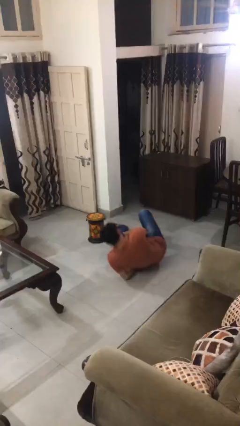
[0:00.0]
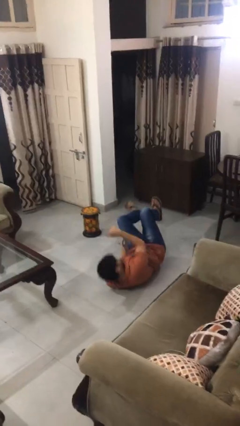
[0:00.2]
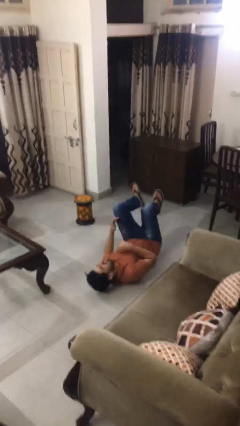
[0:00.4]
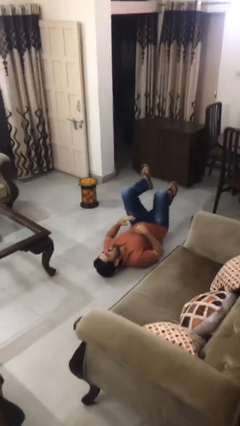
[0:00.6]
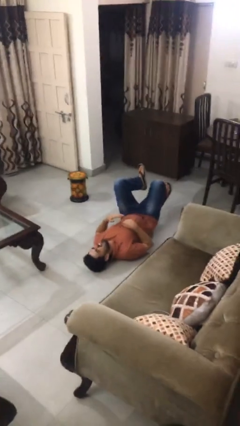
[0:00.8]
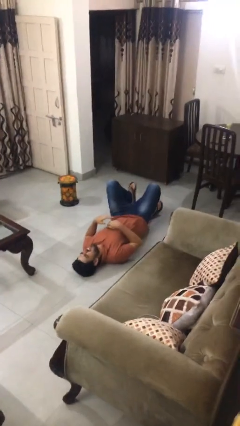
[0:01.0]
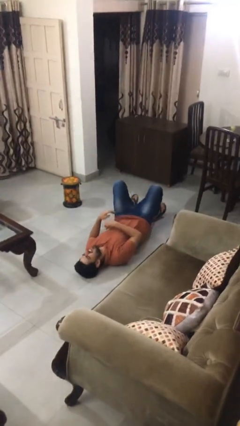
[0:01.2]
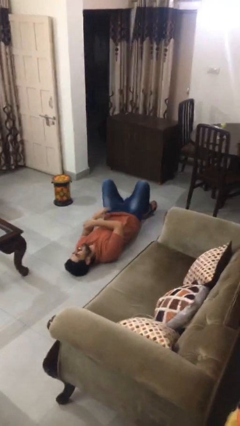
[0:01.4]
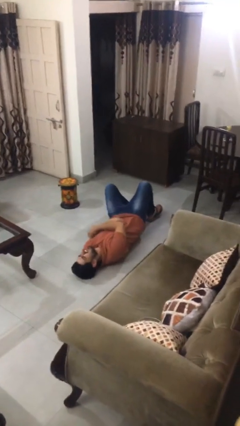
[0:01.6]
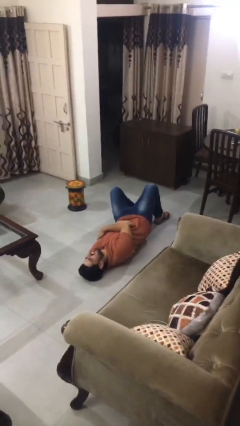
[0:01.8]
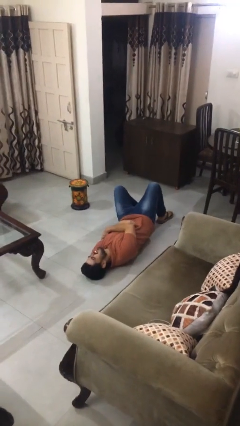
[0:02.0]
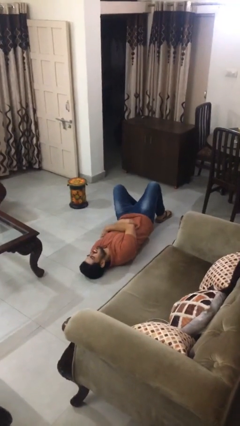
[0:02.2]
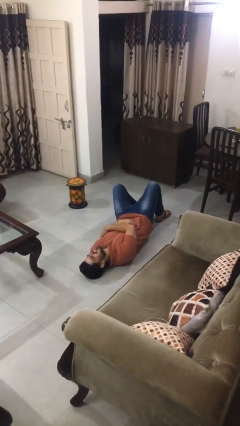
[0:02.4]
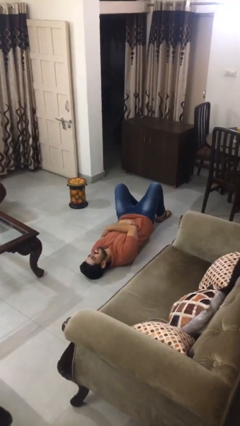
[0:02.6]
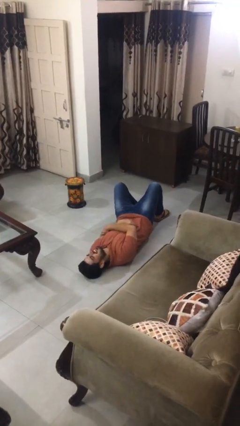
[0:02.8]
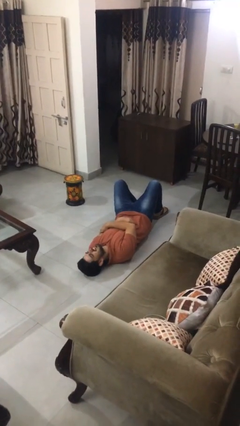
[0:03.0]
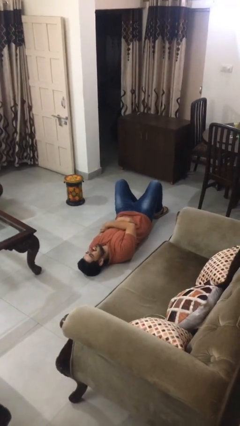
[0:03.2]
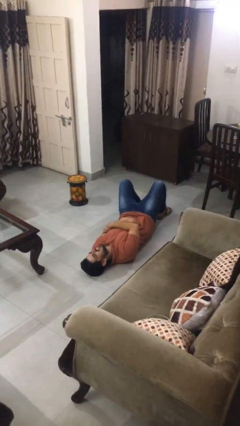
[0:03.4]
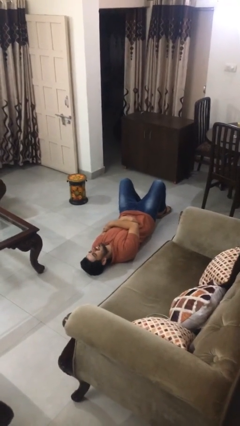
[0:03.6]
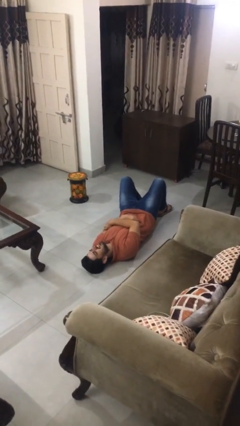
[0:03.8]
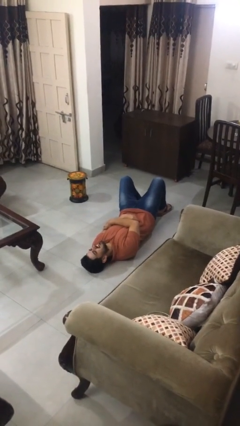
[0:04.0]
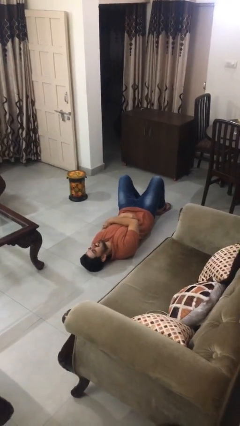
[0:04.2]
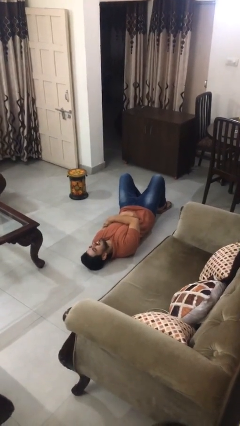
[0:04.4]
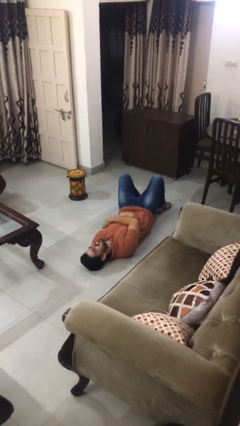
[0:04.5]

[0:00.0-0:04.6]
person lies down on floor

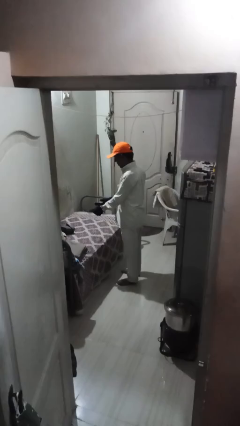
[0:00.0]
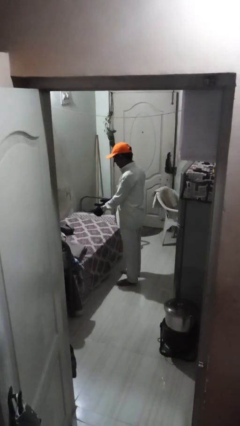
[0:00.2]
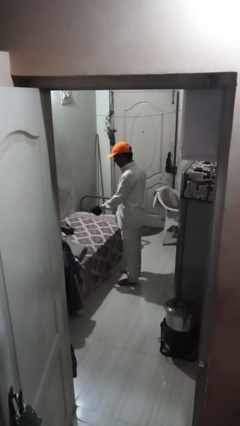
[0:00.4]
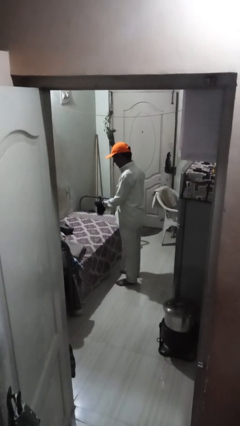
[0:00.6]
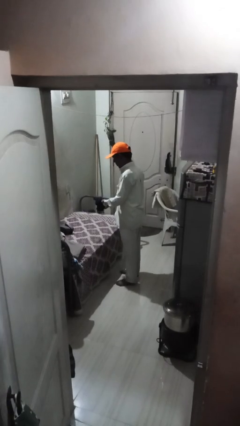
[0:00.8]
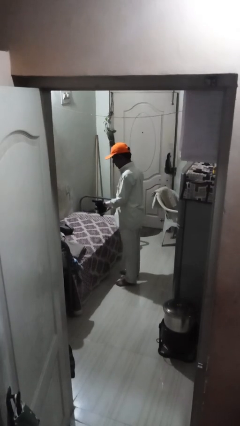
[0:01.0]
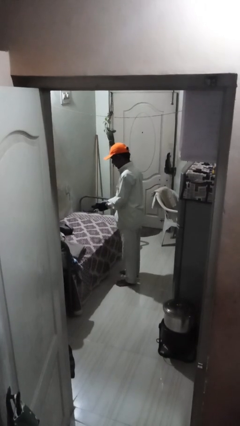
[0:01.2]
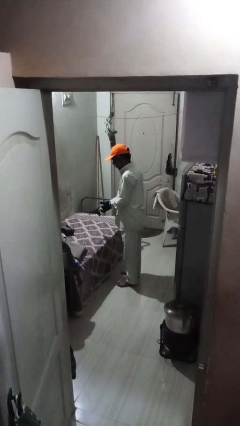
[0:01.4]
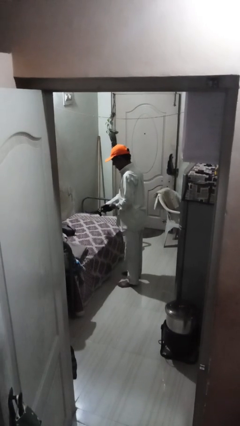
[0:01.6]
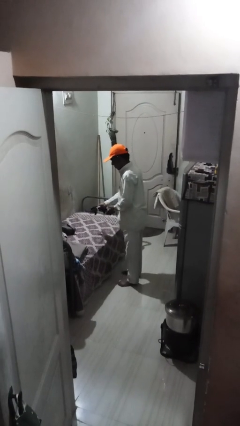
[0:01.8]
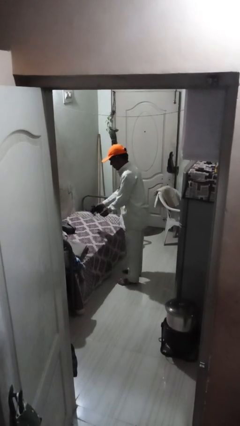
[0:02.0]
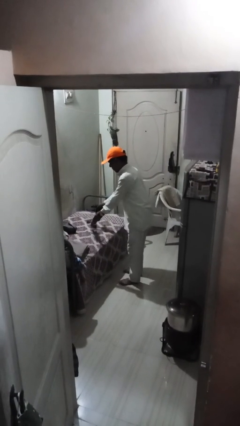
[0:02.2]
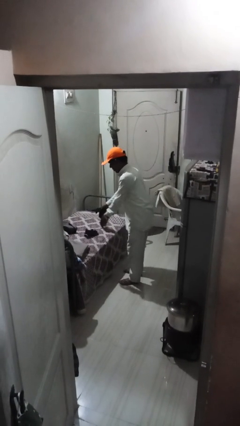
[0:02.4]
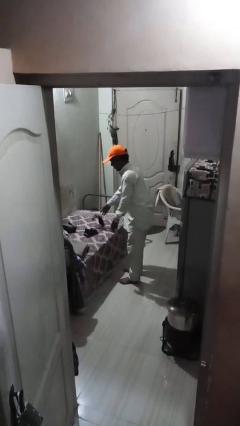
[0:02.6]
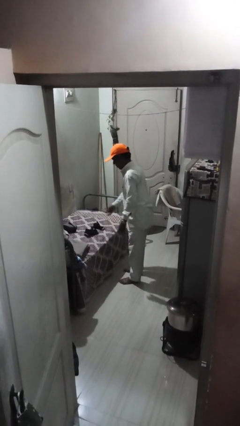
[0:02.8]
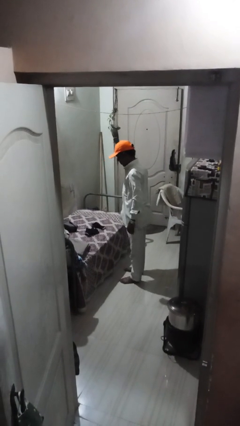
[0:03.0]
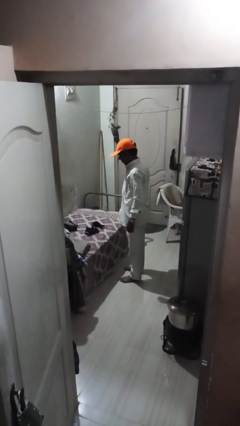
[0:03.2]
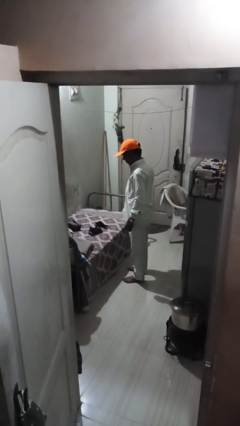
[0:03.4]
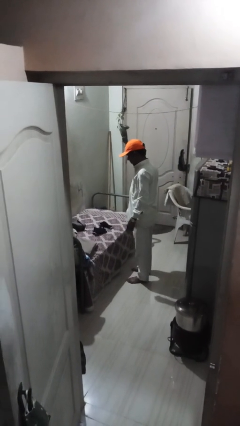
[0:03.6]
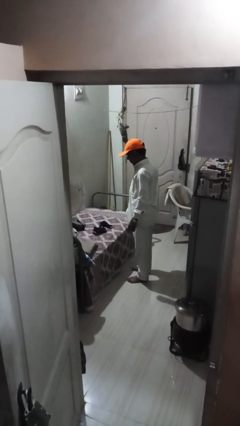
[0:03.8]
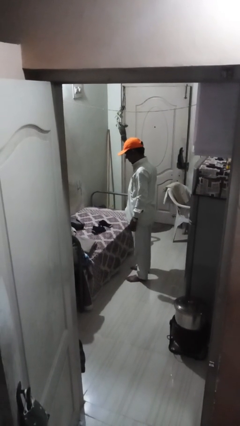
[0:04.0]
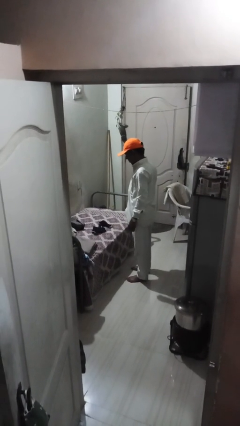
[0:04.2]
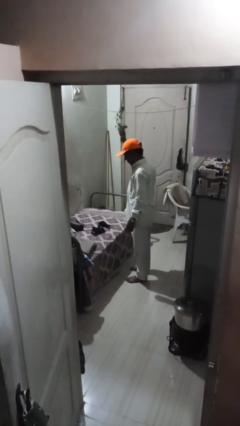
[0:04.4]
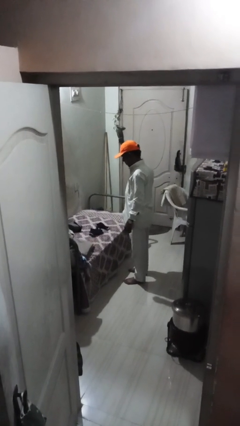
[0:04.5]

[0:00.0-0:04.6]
person takes off gloves

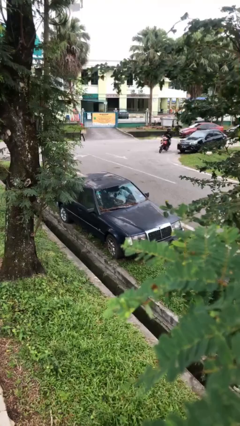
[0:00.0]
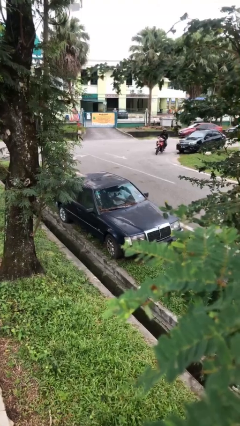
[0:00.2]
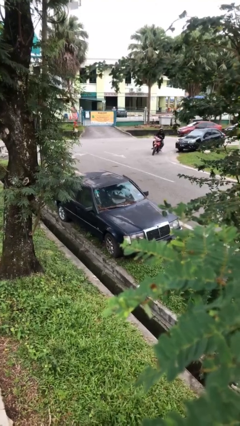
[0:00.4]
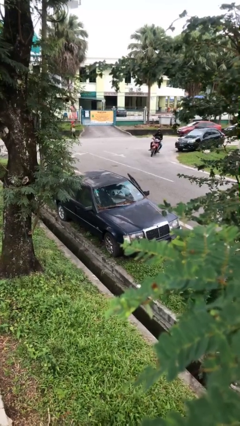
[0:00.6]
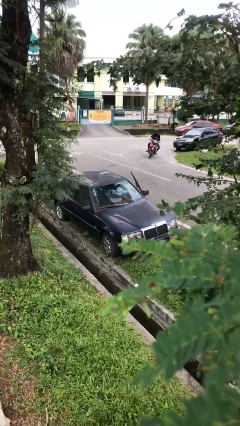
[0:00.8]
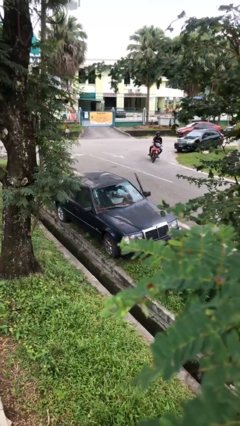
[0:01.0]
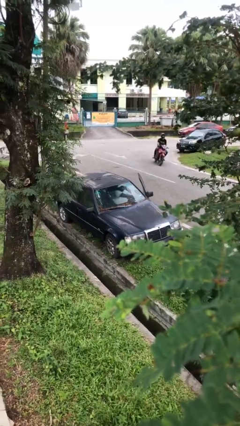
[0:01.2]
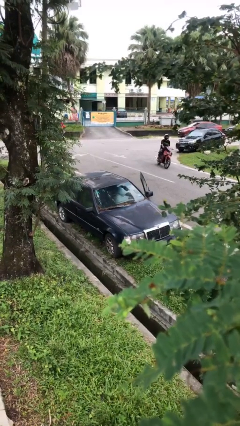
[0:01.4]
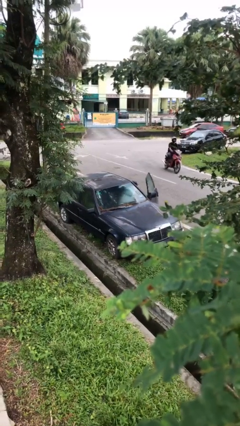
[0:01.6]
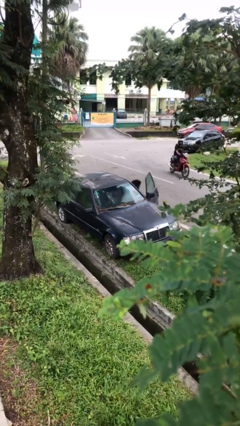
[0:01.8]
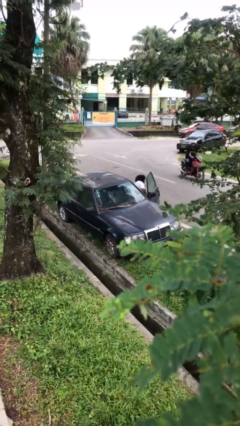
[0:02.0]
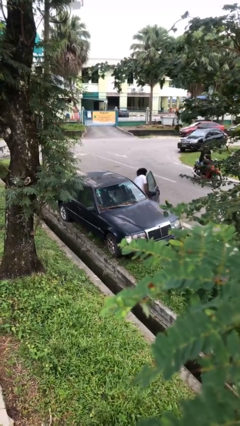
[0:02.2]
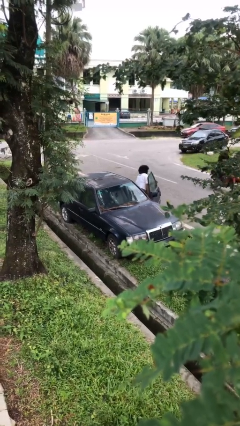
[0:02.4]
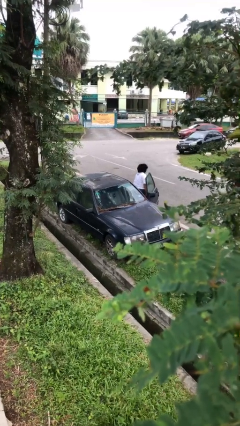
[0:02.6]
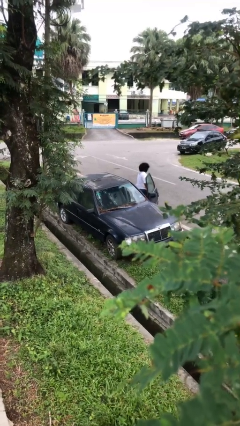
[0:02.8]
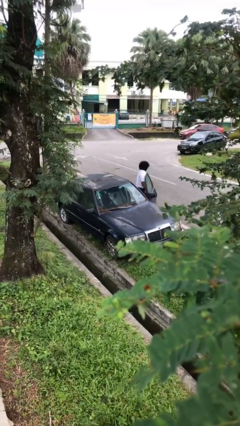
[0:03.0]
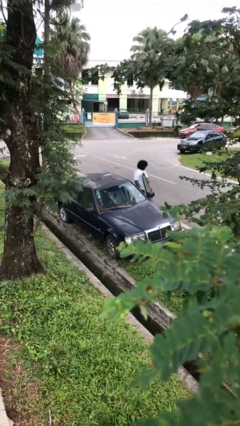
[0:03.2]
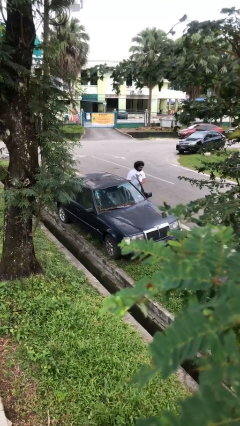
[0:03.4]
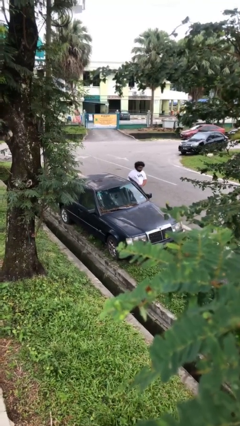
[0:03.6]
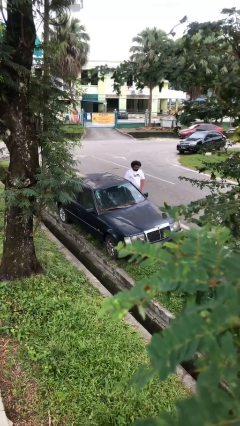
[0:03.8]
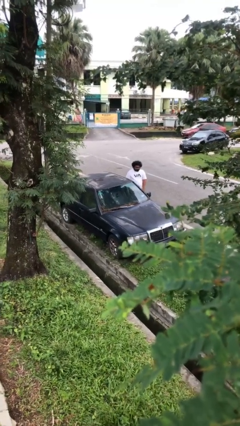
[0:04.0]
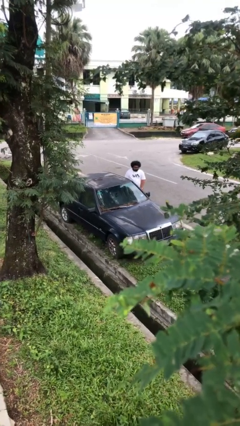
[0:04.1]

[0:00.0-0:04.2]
car drops off person

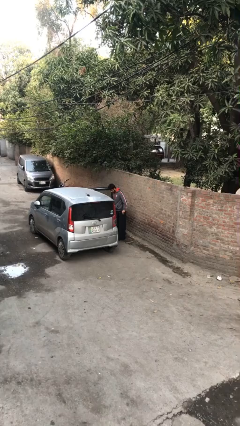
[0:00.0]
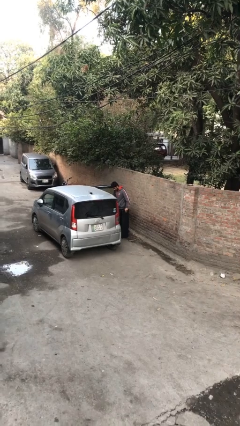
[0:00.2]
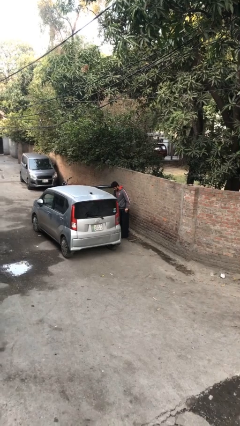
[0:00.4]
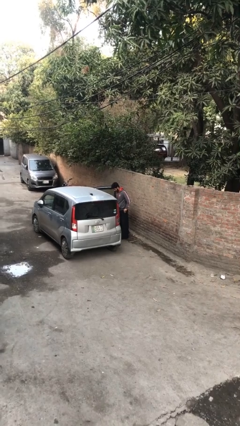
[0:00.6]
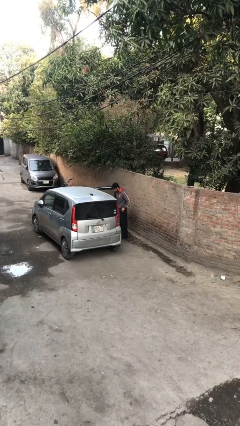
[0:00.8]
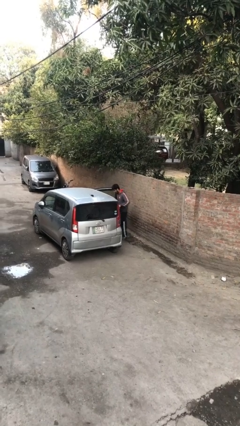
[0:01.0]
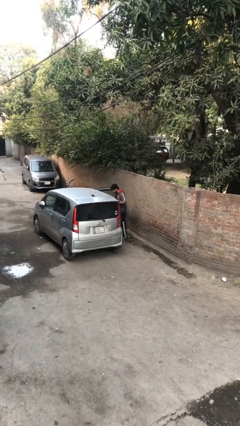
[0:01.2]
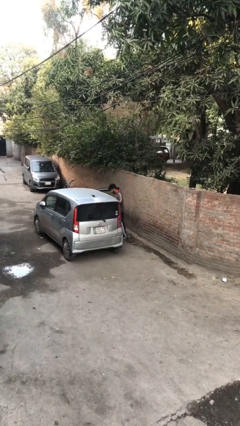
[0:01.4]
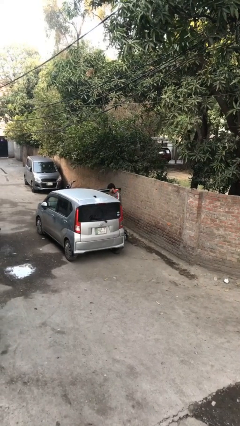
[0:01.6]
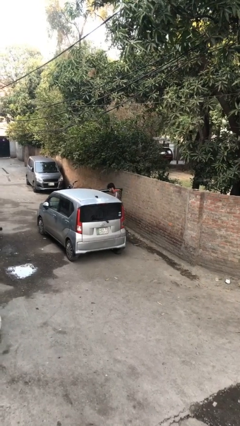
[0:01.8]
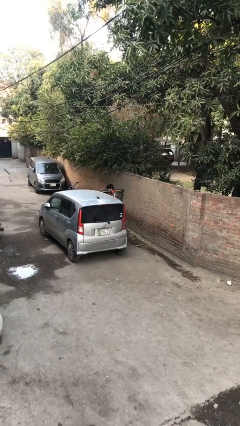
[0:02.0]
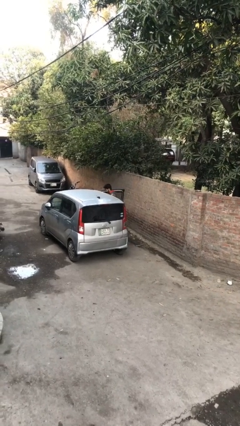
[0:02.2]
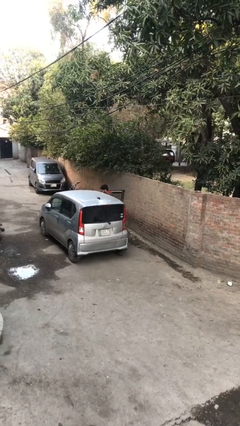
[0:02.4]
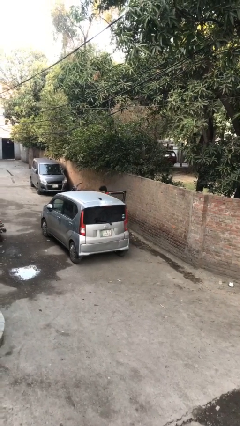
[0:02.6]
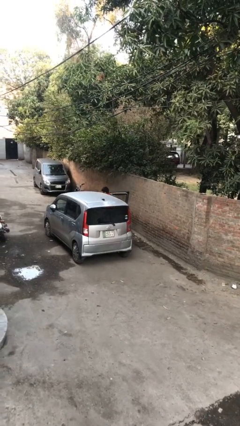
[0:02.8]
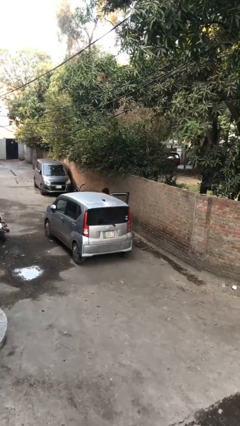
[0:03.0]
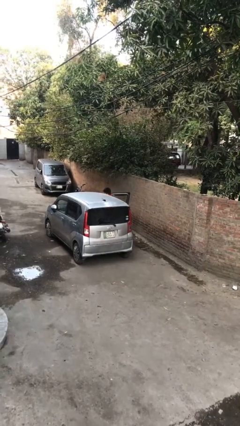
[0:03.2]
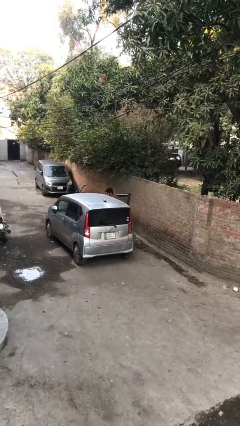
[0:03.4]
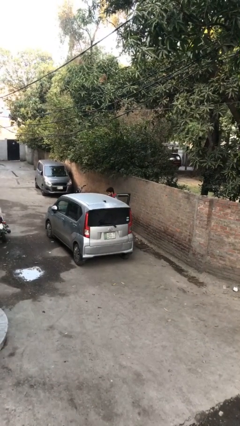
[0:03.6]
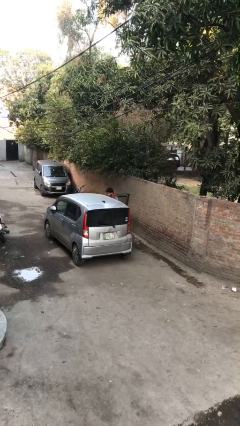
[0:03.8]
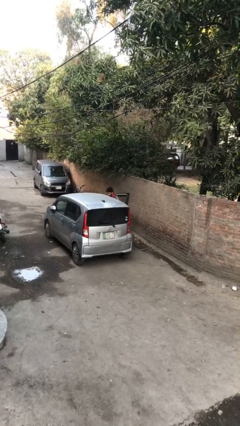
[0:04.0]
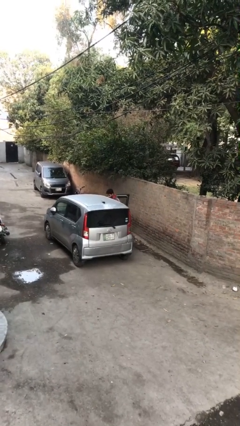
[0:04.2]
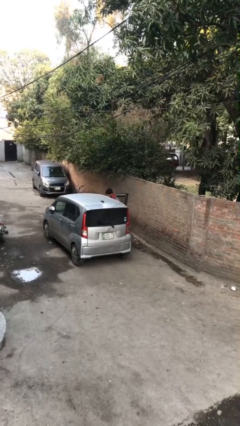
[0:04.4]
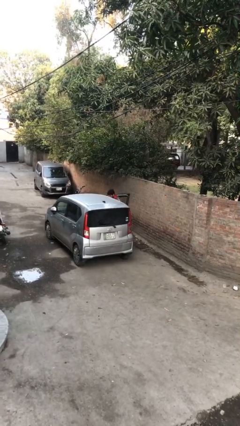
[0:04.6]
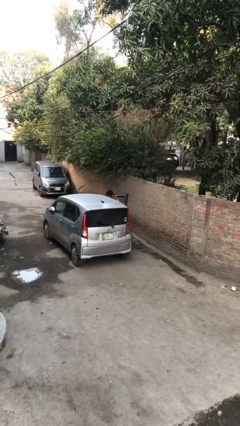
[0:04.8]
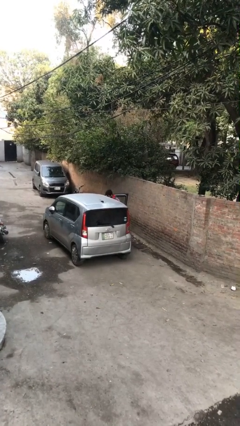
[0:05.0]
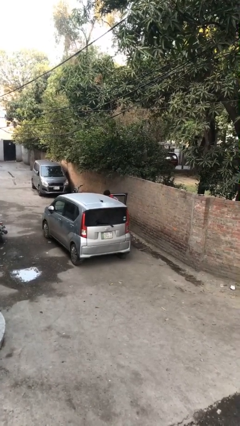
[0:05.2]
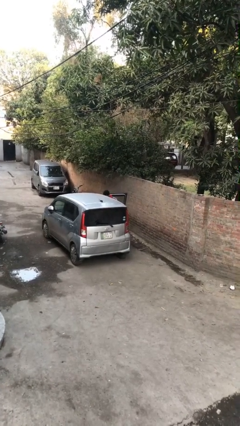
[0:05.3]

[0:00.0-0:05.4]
person loads car
